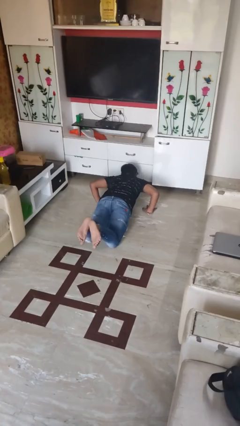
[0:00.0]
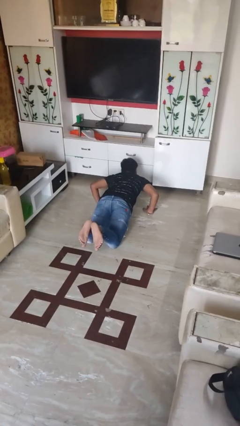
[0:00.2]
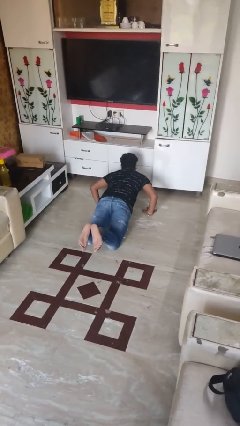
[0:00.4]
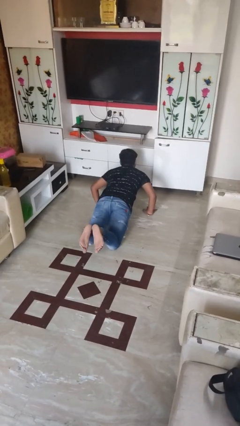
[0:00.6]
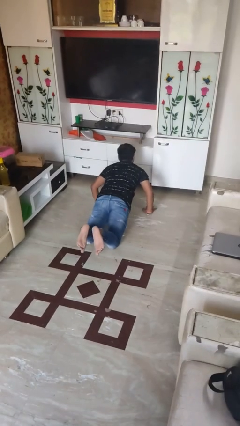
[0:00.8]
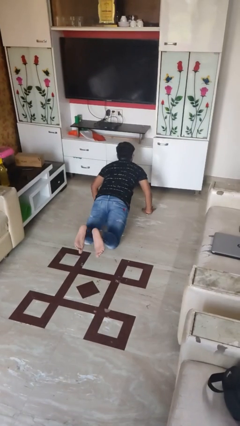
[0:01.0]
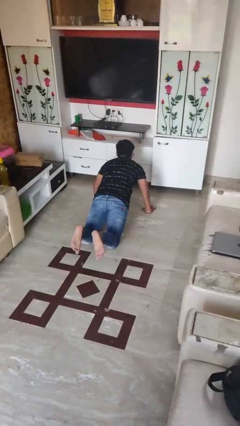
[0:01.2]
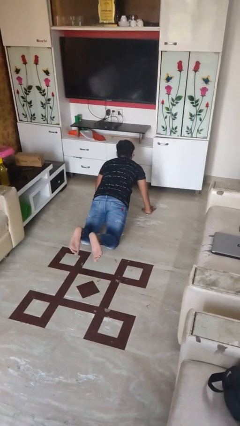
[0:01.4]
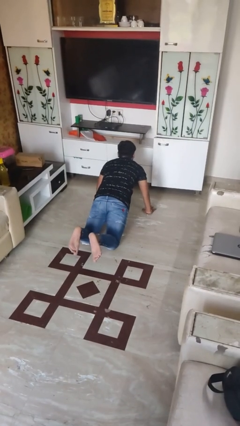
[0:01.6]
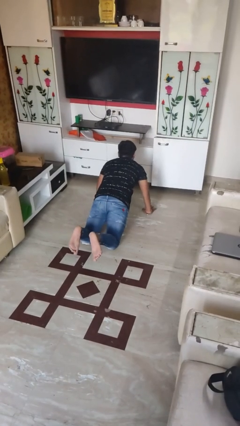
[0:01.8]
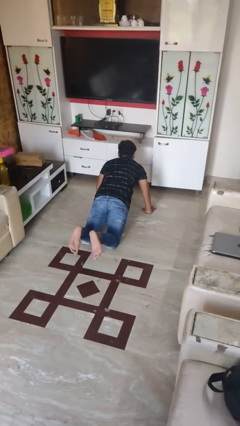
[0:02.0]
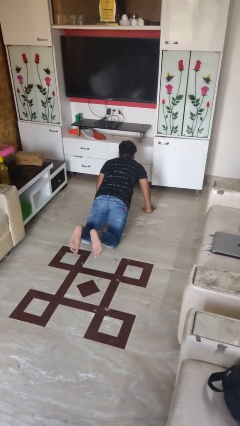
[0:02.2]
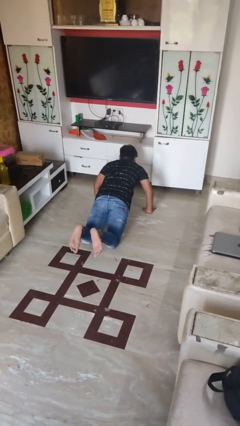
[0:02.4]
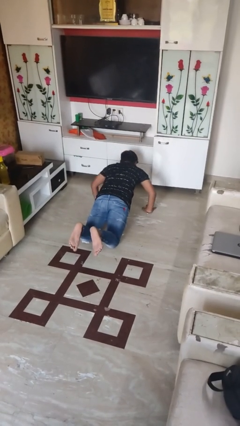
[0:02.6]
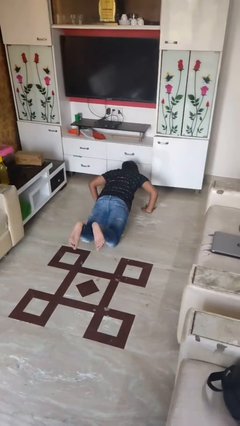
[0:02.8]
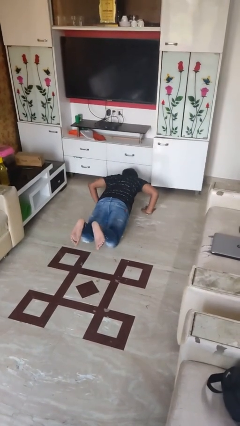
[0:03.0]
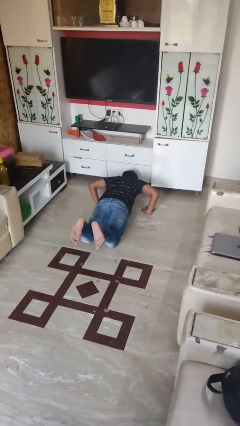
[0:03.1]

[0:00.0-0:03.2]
person exercises with pushup

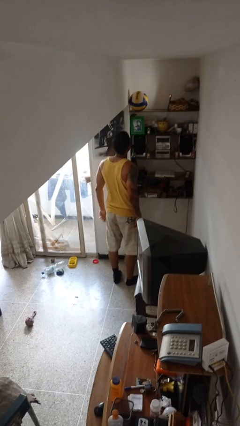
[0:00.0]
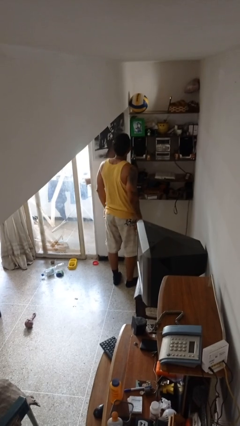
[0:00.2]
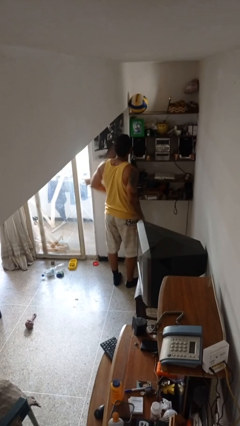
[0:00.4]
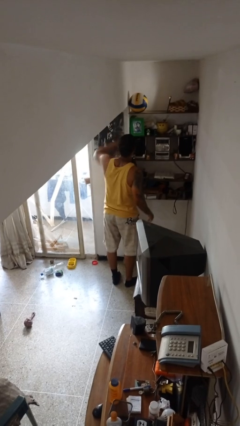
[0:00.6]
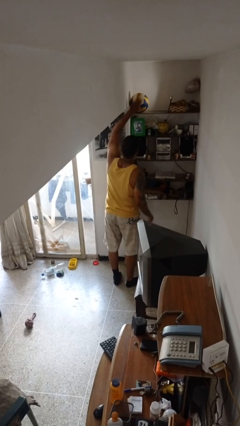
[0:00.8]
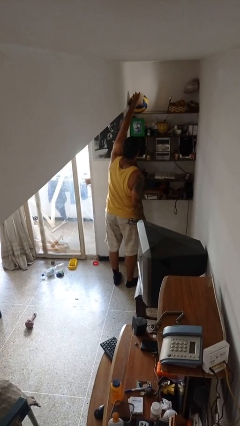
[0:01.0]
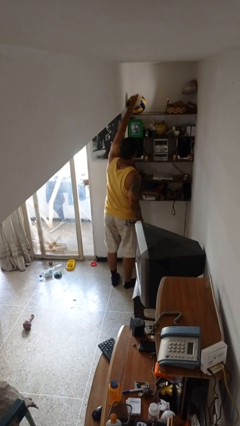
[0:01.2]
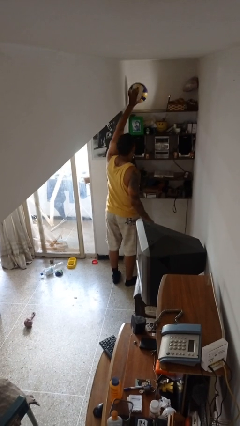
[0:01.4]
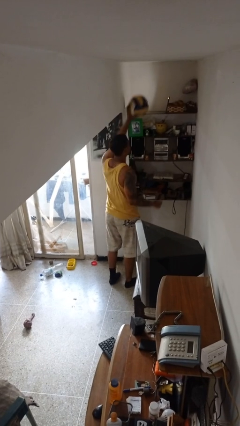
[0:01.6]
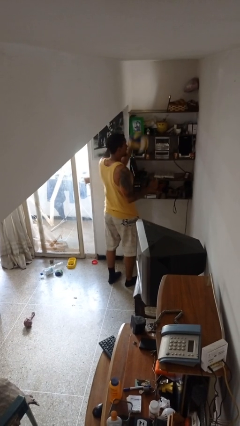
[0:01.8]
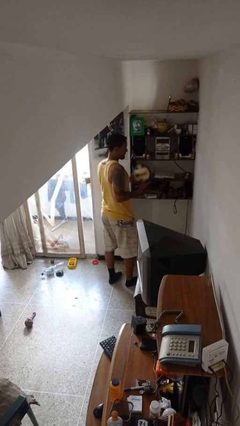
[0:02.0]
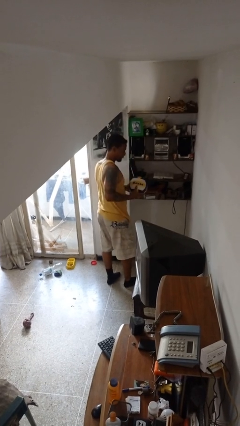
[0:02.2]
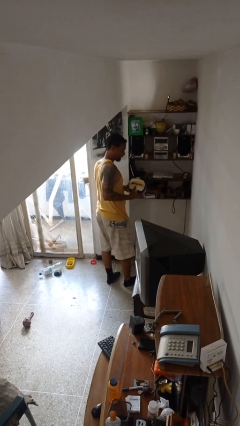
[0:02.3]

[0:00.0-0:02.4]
person picks up object from shelf

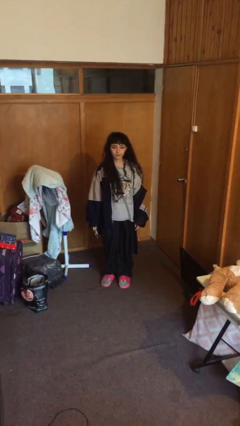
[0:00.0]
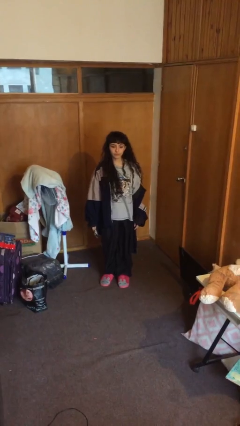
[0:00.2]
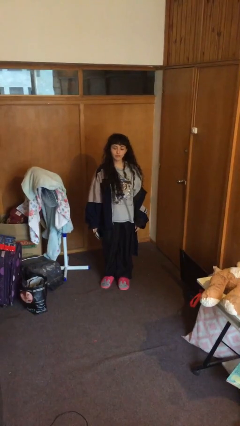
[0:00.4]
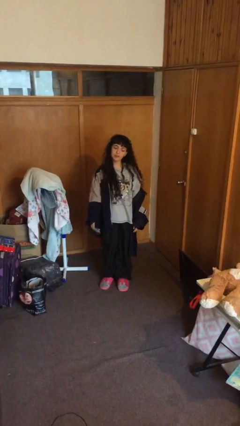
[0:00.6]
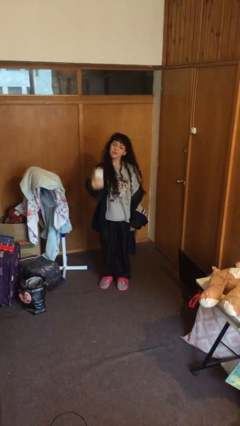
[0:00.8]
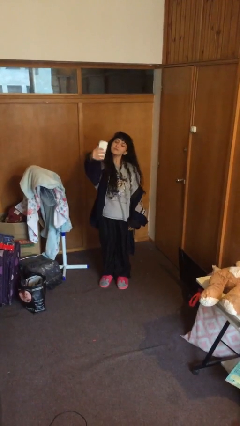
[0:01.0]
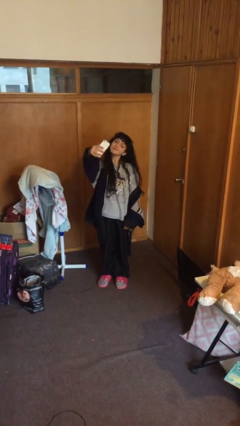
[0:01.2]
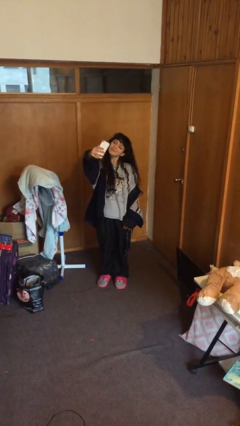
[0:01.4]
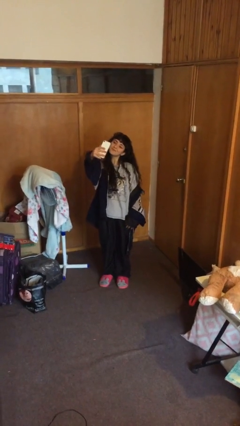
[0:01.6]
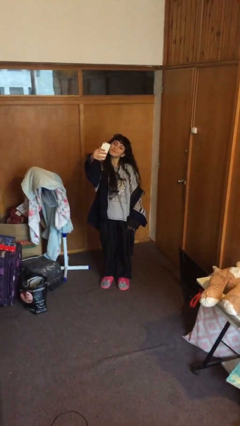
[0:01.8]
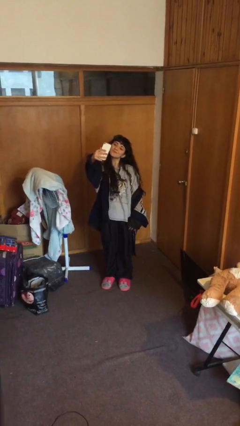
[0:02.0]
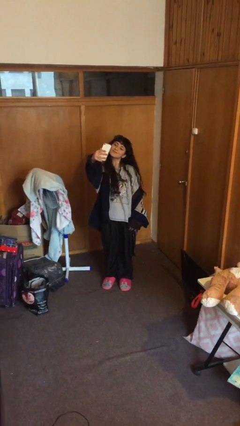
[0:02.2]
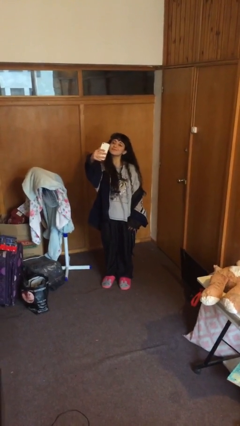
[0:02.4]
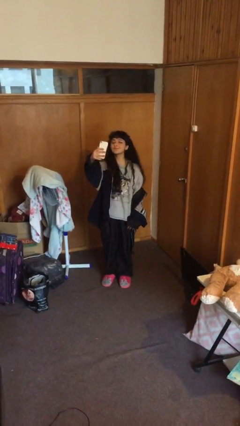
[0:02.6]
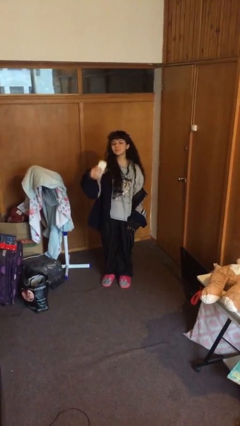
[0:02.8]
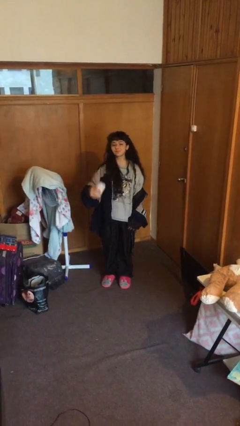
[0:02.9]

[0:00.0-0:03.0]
person takes selfie

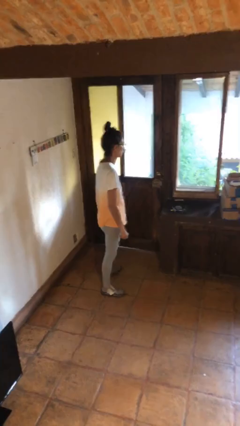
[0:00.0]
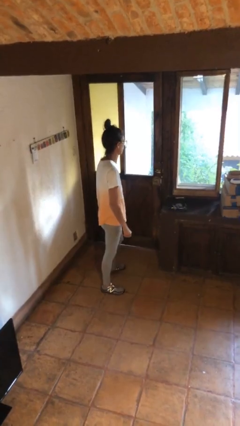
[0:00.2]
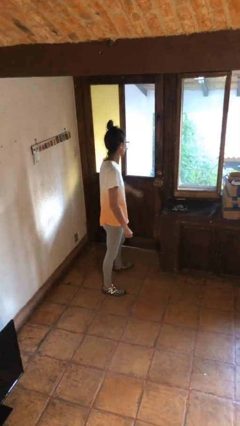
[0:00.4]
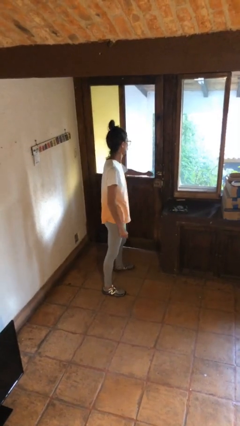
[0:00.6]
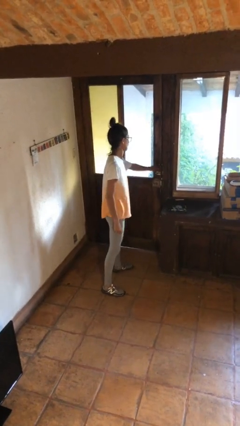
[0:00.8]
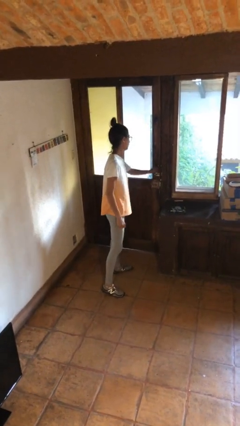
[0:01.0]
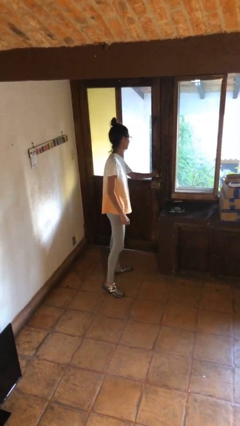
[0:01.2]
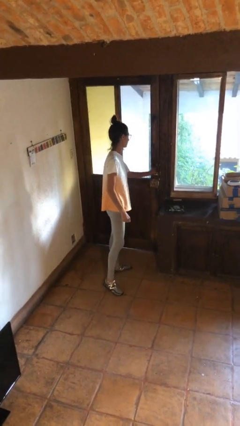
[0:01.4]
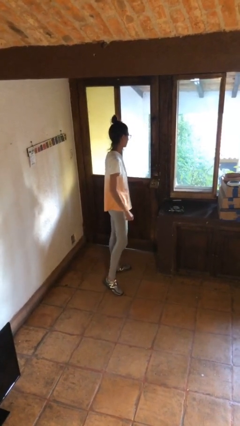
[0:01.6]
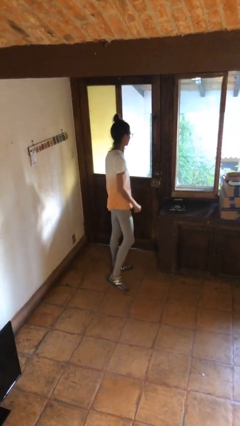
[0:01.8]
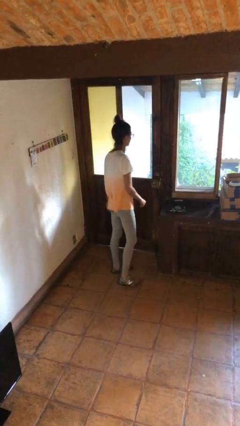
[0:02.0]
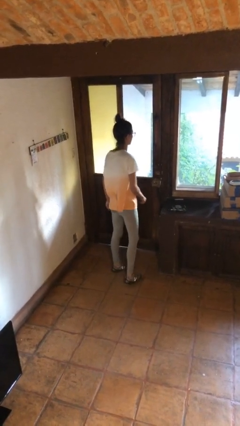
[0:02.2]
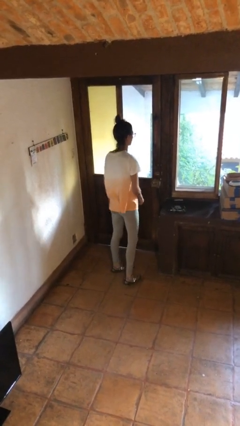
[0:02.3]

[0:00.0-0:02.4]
person unlocks door with keys

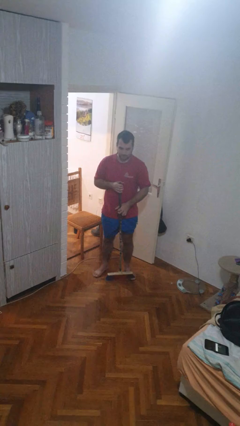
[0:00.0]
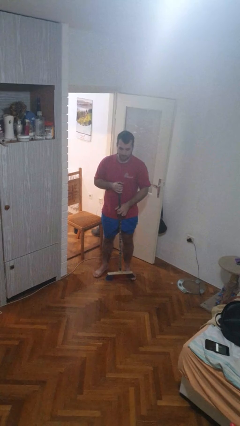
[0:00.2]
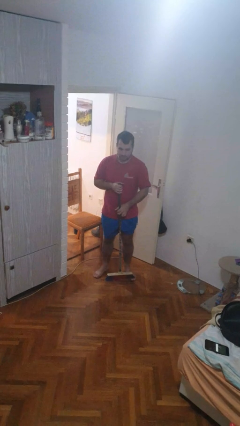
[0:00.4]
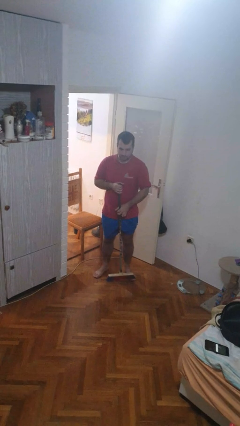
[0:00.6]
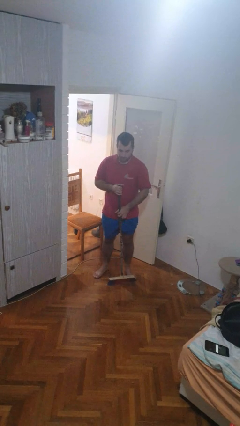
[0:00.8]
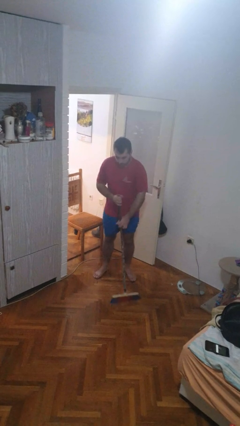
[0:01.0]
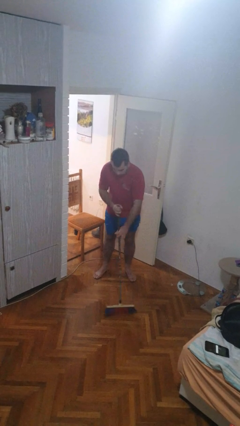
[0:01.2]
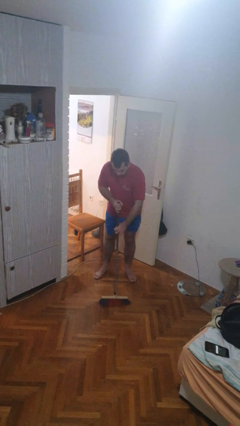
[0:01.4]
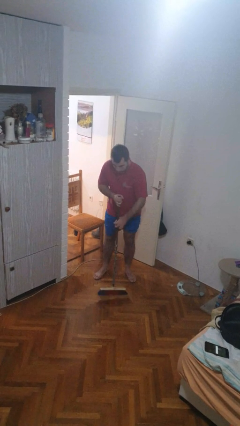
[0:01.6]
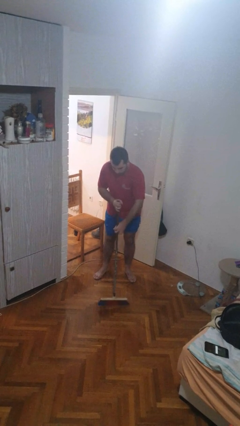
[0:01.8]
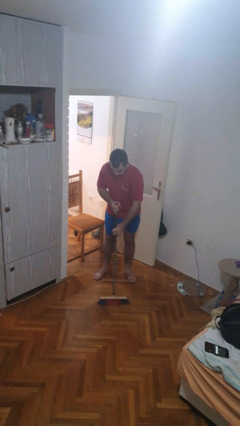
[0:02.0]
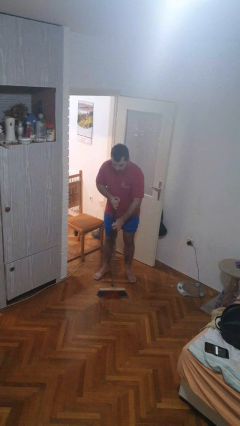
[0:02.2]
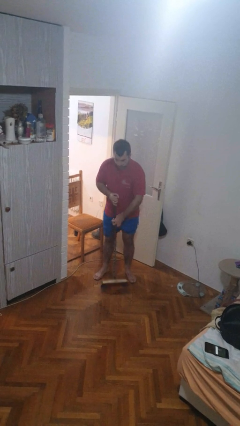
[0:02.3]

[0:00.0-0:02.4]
person sweeps floor

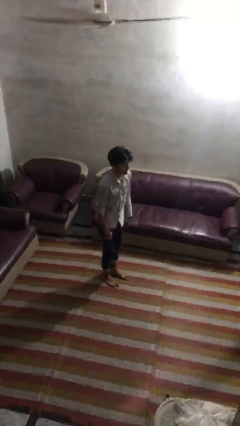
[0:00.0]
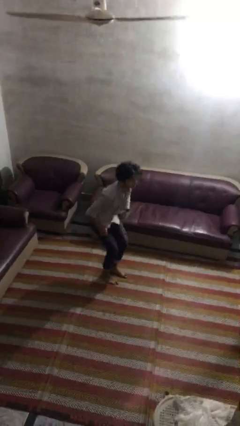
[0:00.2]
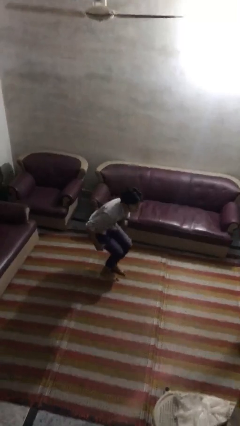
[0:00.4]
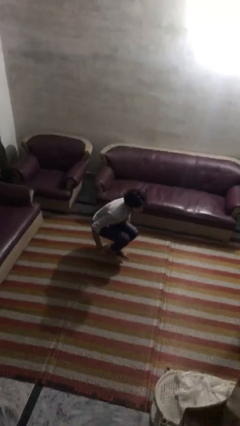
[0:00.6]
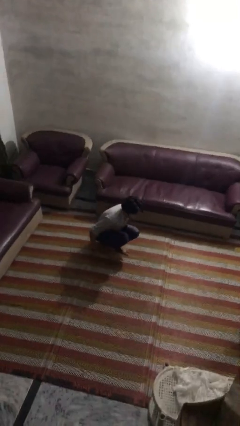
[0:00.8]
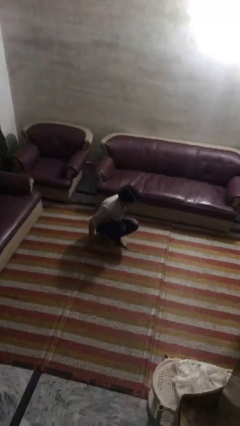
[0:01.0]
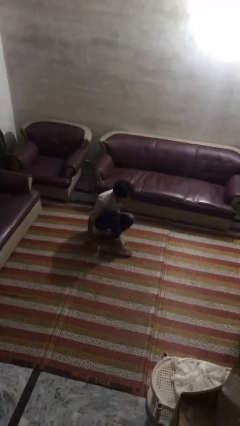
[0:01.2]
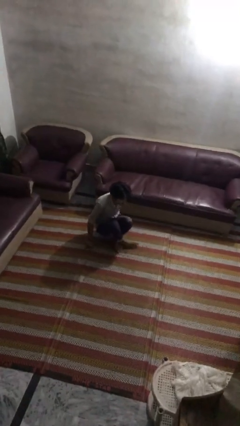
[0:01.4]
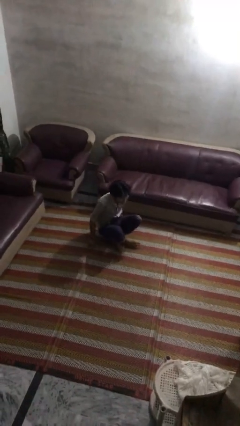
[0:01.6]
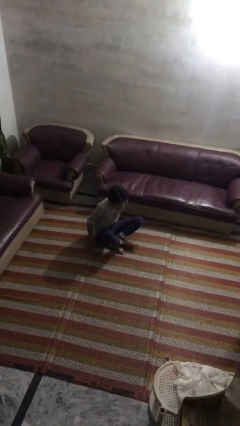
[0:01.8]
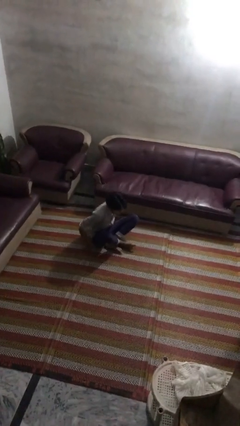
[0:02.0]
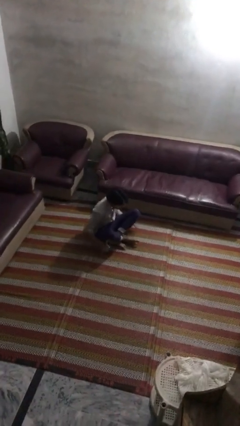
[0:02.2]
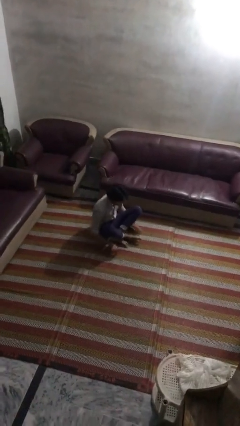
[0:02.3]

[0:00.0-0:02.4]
person sits crisscross

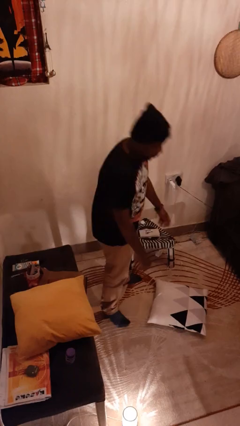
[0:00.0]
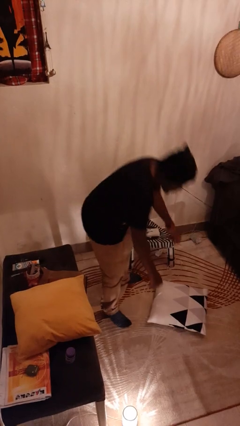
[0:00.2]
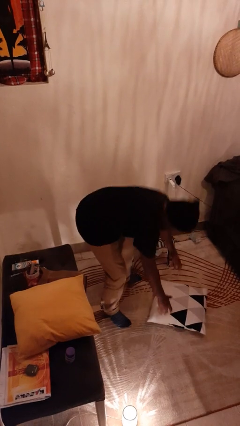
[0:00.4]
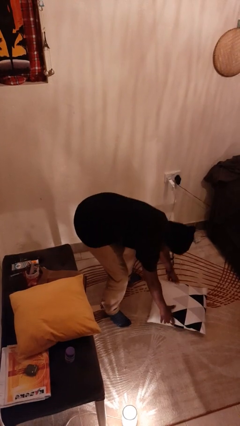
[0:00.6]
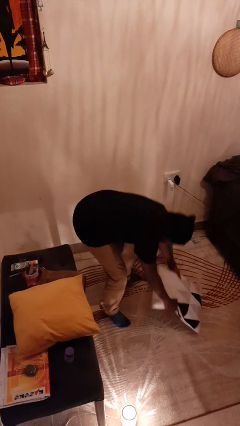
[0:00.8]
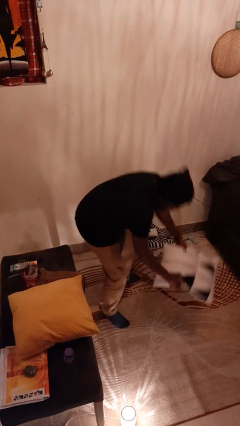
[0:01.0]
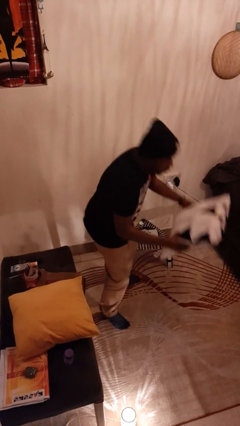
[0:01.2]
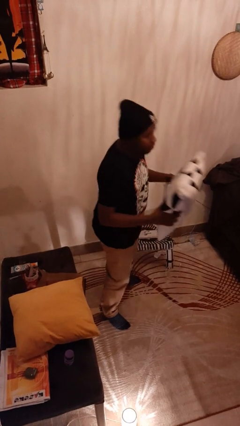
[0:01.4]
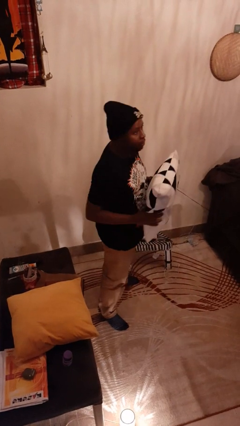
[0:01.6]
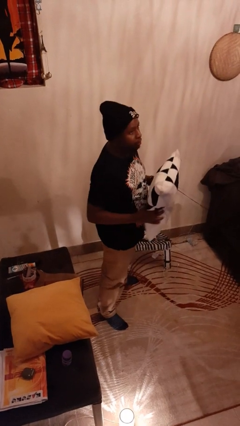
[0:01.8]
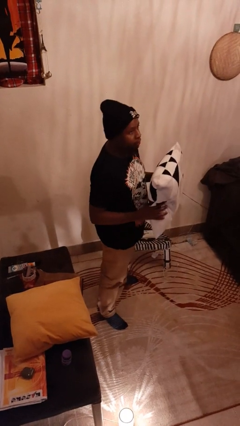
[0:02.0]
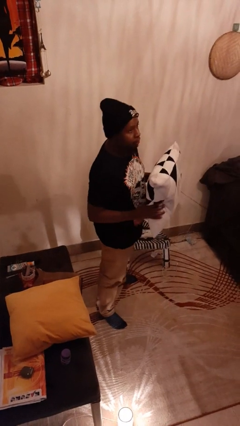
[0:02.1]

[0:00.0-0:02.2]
person picks up object from floor
